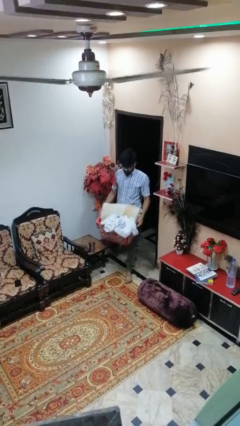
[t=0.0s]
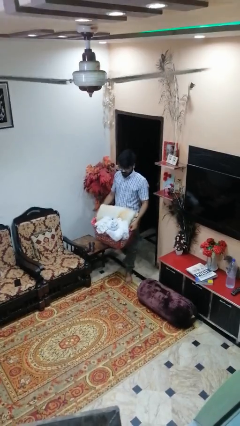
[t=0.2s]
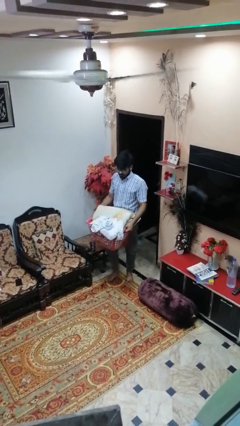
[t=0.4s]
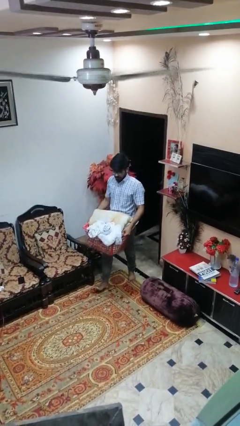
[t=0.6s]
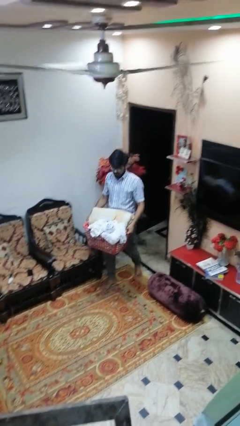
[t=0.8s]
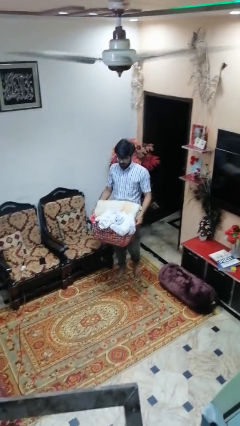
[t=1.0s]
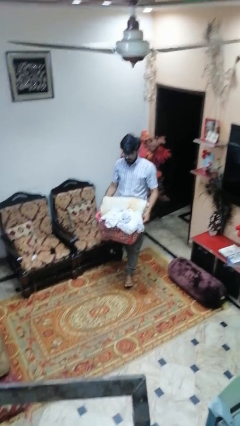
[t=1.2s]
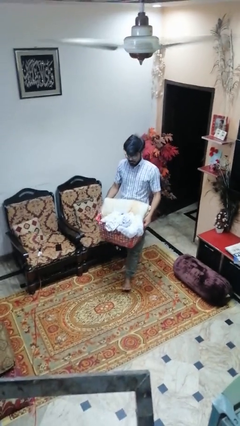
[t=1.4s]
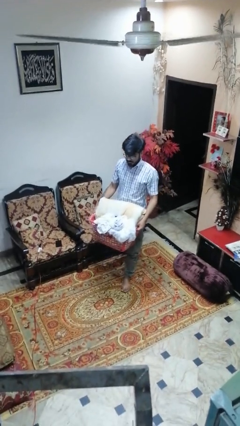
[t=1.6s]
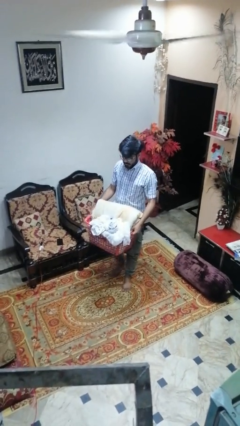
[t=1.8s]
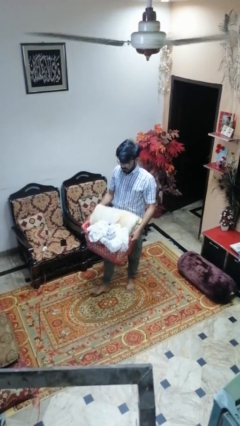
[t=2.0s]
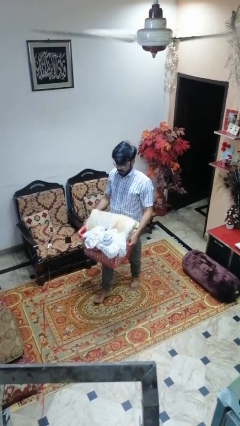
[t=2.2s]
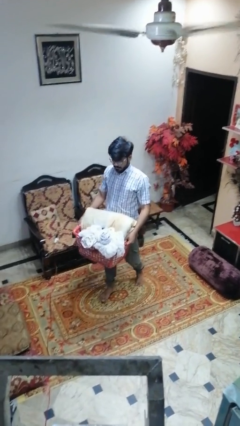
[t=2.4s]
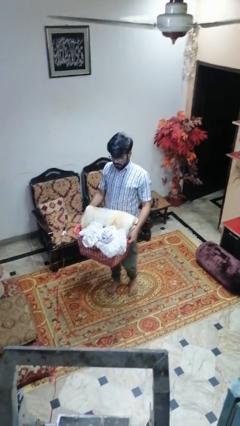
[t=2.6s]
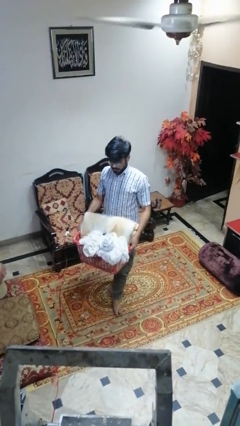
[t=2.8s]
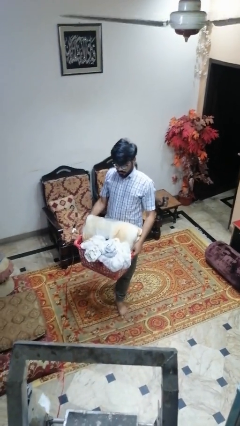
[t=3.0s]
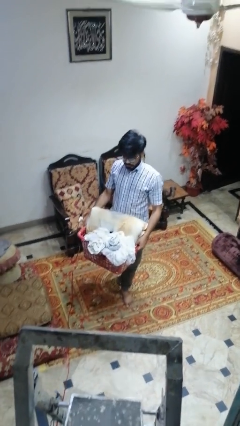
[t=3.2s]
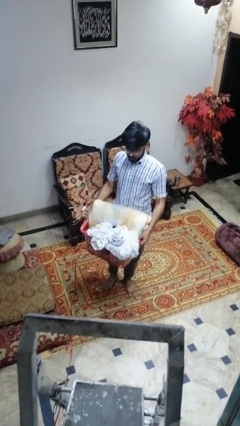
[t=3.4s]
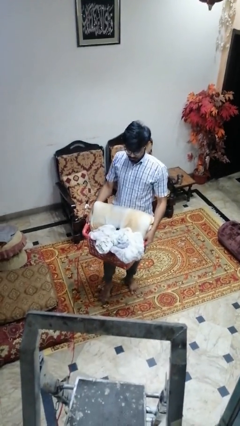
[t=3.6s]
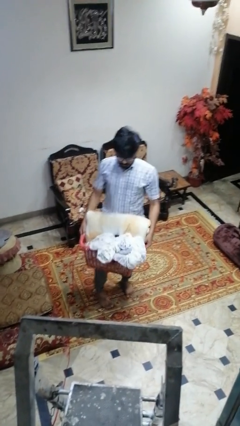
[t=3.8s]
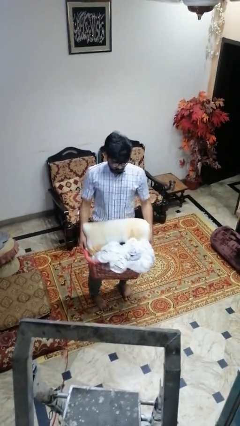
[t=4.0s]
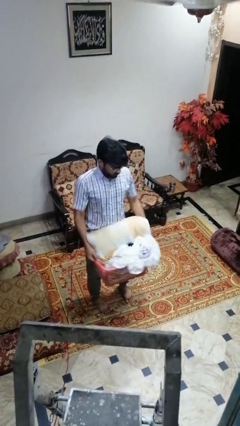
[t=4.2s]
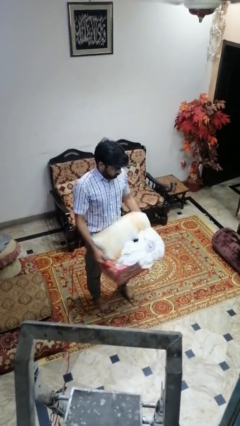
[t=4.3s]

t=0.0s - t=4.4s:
person carries laundry basket

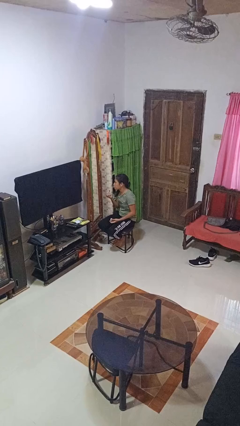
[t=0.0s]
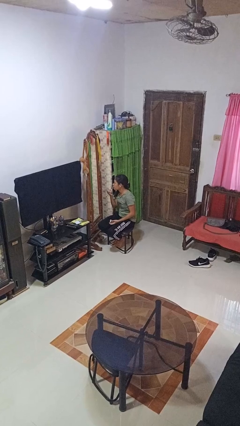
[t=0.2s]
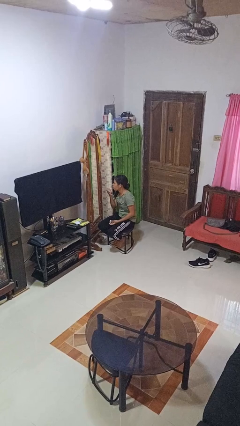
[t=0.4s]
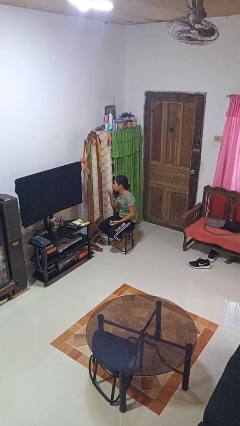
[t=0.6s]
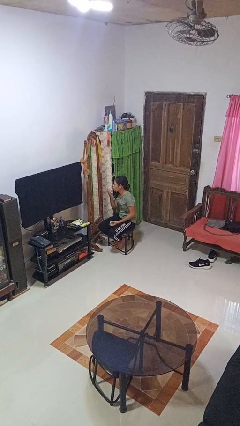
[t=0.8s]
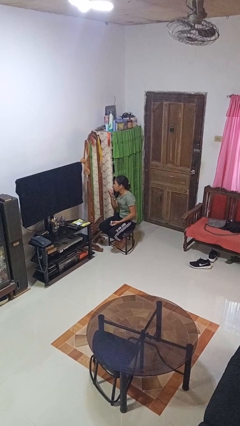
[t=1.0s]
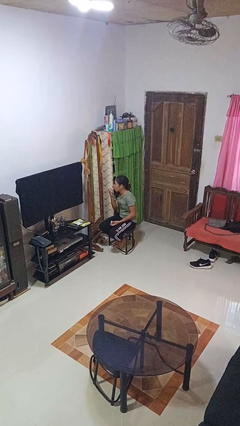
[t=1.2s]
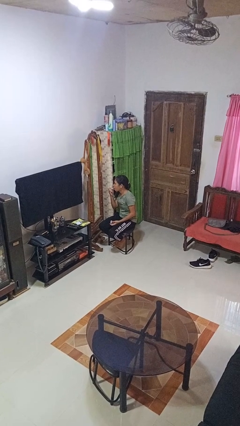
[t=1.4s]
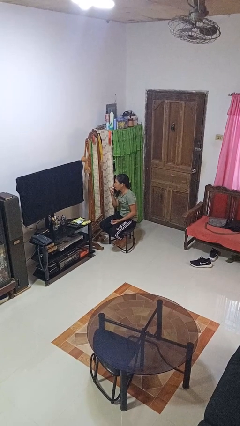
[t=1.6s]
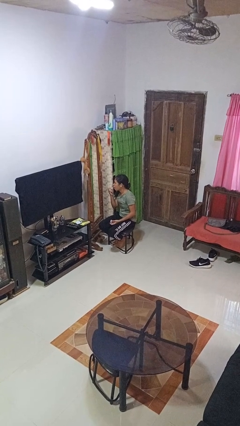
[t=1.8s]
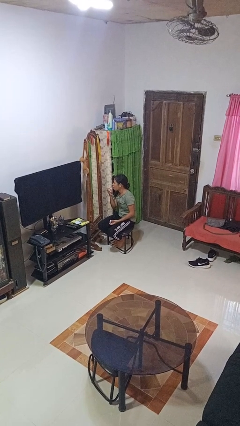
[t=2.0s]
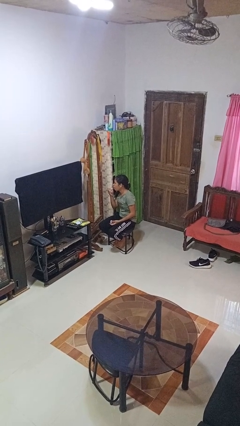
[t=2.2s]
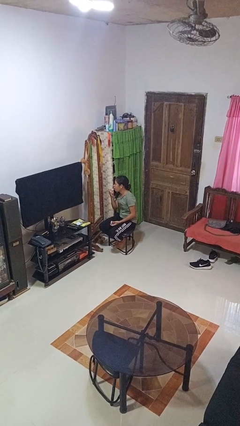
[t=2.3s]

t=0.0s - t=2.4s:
person applies lip makeup

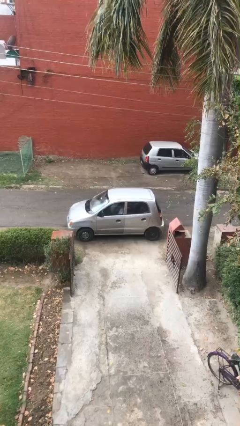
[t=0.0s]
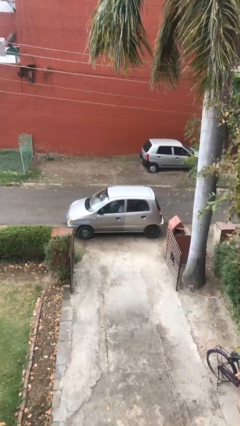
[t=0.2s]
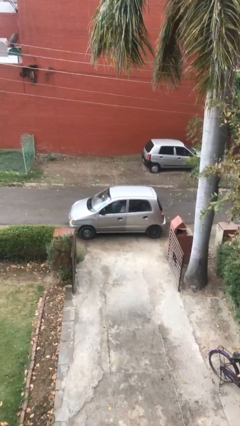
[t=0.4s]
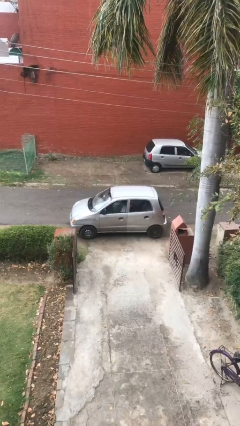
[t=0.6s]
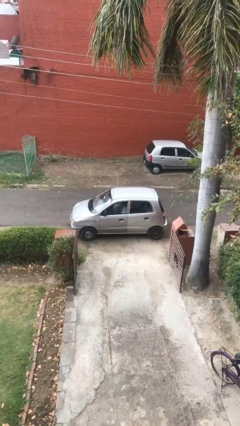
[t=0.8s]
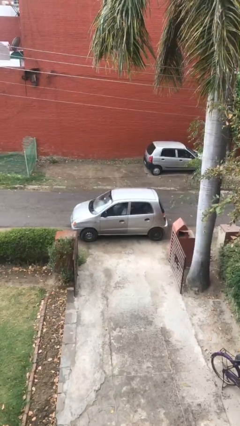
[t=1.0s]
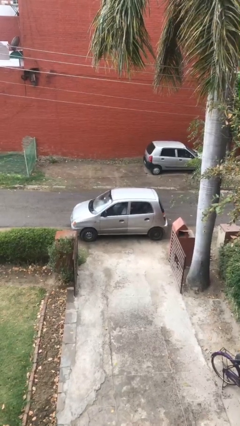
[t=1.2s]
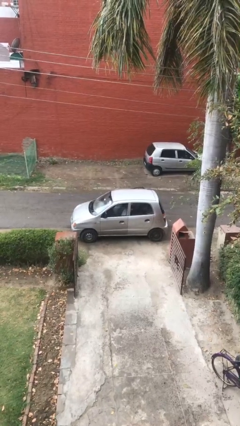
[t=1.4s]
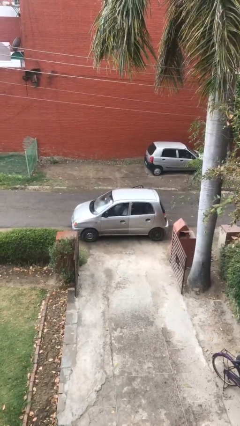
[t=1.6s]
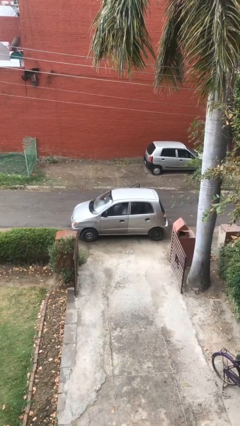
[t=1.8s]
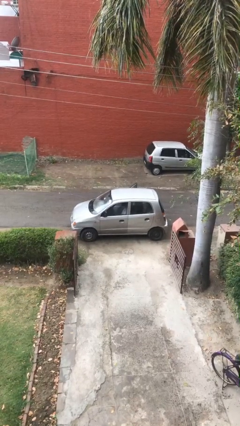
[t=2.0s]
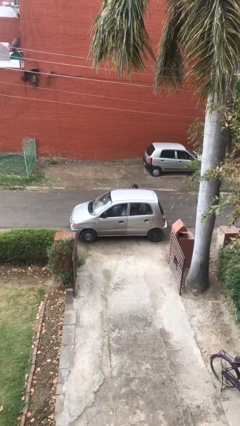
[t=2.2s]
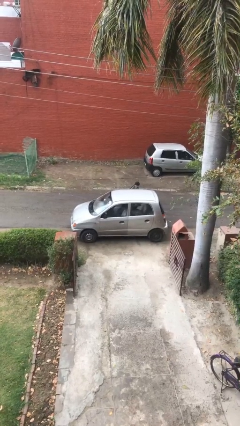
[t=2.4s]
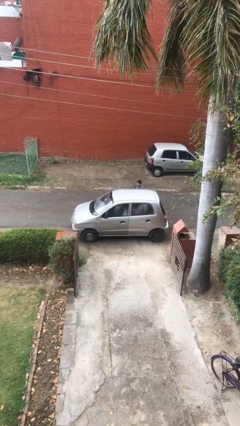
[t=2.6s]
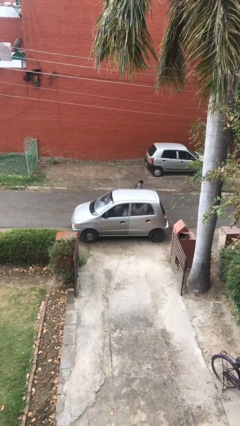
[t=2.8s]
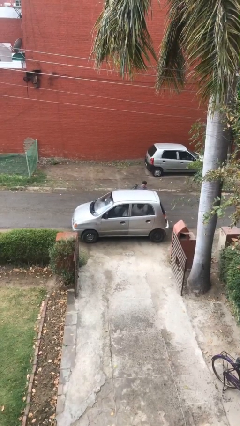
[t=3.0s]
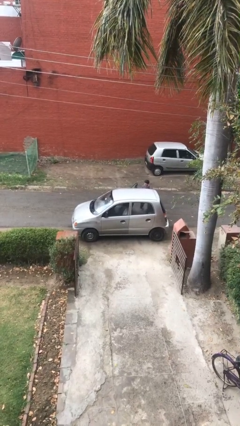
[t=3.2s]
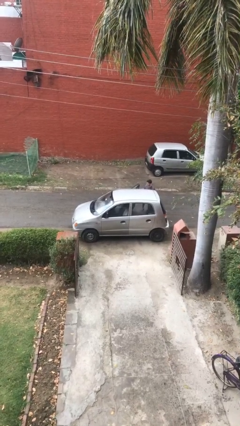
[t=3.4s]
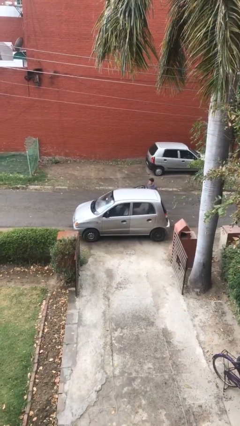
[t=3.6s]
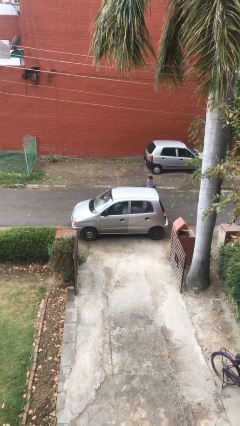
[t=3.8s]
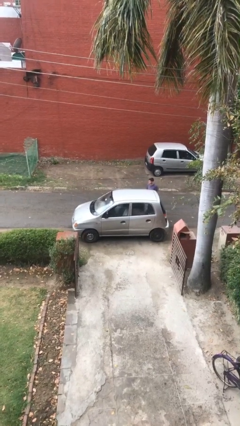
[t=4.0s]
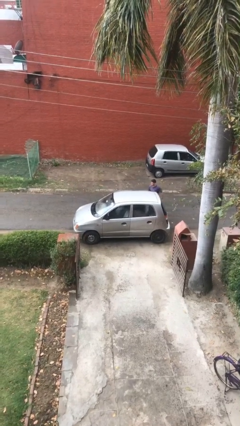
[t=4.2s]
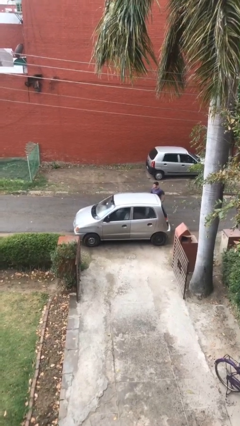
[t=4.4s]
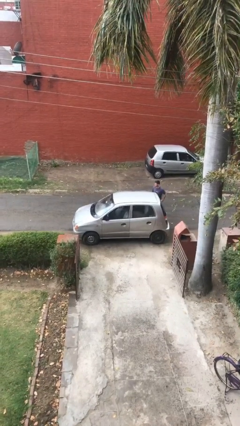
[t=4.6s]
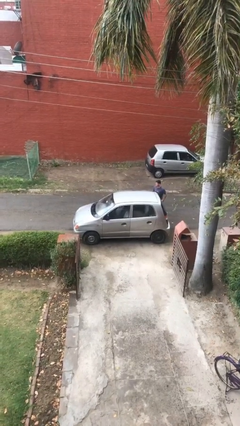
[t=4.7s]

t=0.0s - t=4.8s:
car drops off person

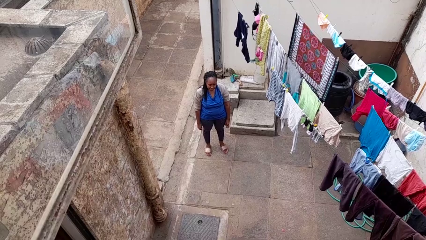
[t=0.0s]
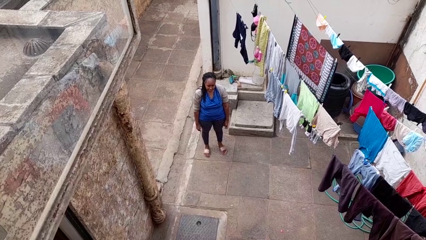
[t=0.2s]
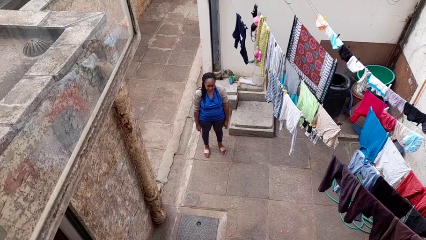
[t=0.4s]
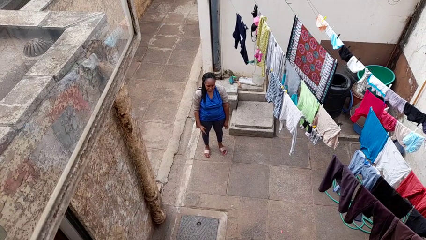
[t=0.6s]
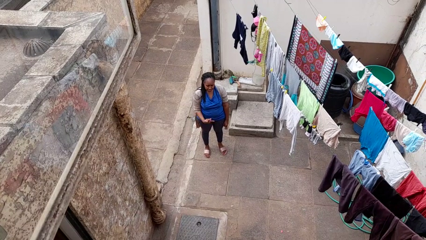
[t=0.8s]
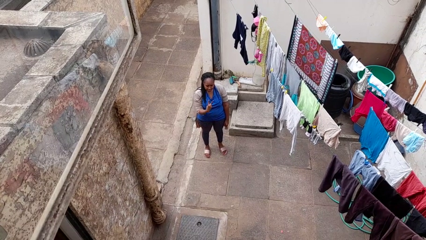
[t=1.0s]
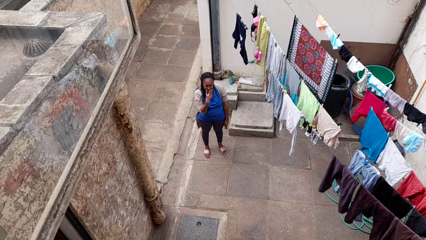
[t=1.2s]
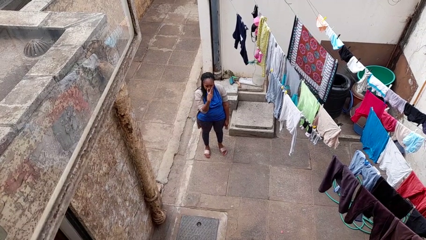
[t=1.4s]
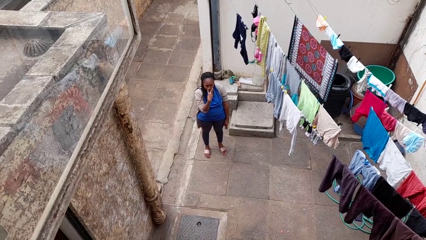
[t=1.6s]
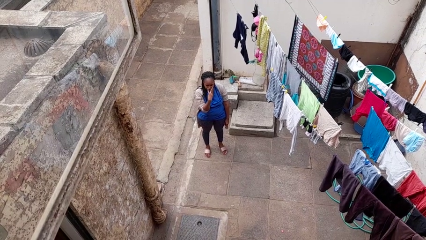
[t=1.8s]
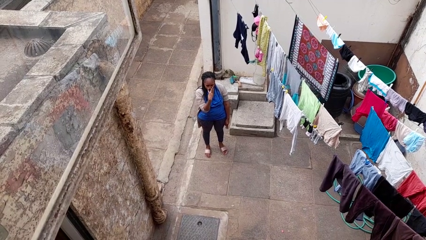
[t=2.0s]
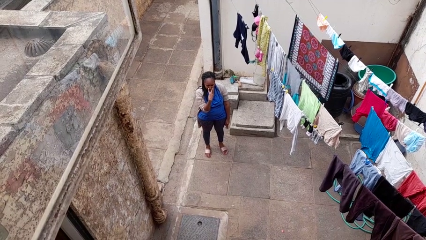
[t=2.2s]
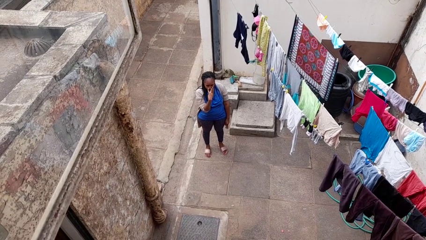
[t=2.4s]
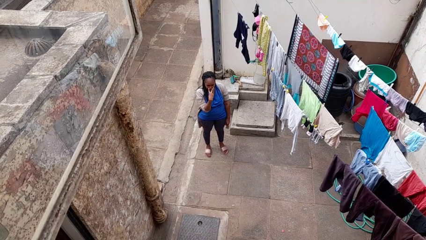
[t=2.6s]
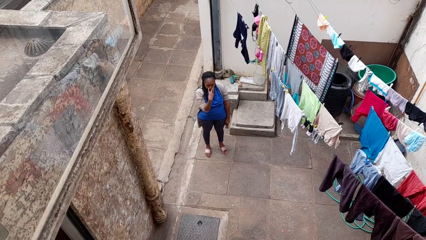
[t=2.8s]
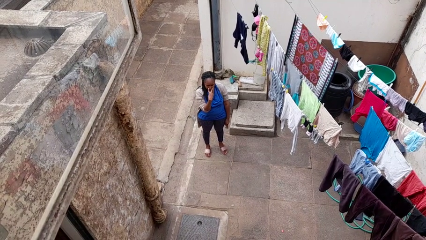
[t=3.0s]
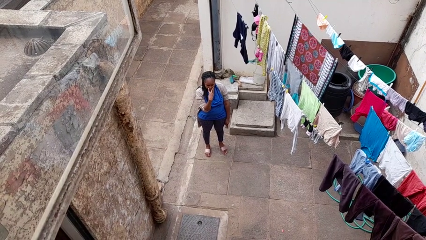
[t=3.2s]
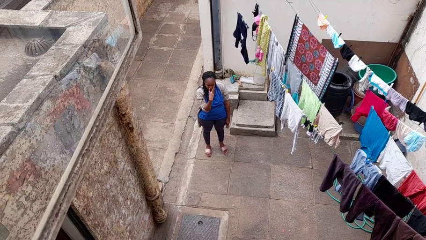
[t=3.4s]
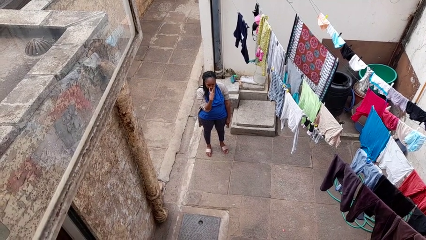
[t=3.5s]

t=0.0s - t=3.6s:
person gestures watch closely

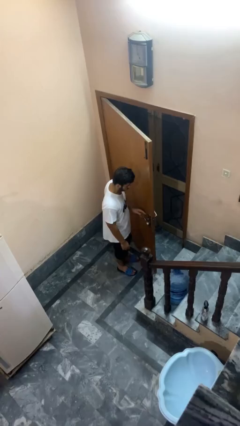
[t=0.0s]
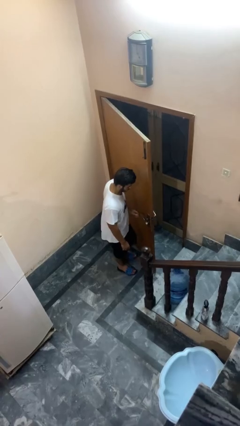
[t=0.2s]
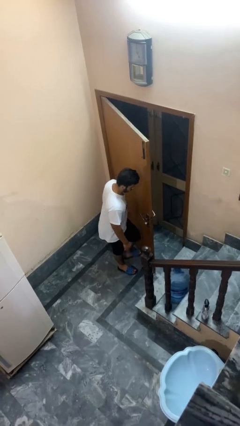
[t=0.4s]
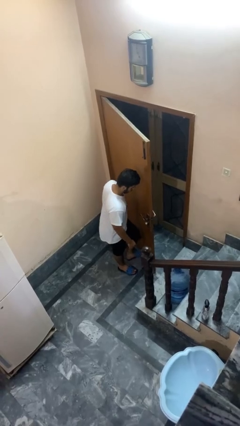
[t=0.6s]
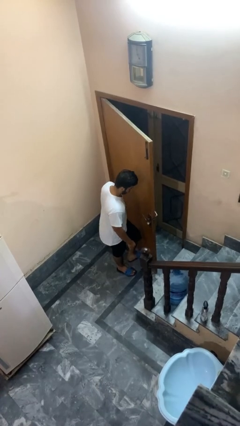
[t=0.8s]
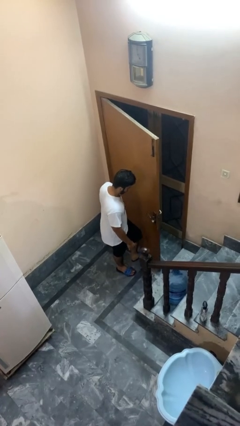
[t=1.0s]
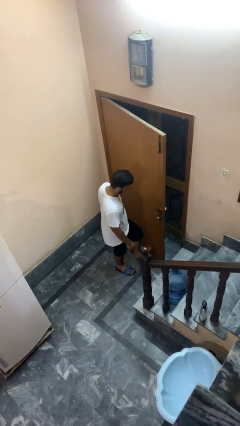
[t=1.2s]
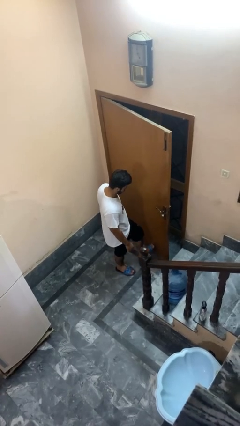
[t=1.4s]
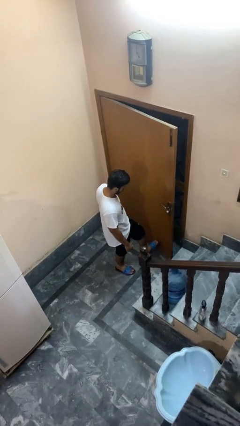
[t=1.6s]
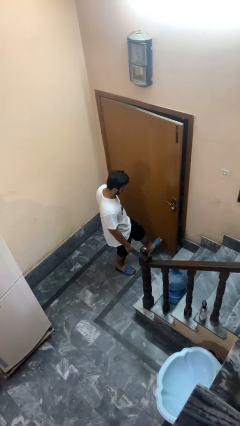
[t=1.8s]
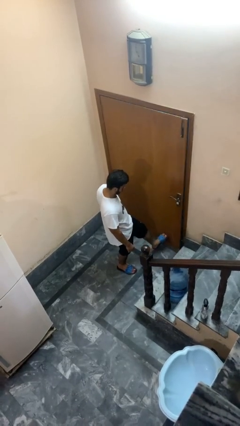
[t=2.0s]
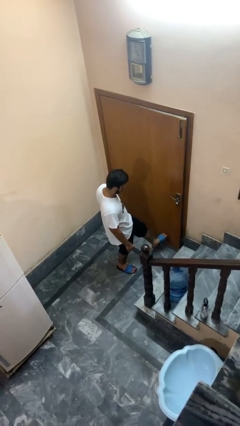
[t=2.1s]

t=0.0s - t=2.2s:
person closes door with foot
